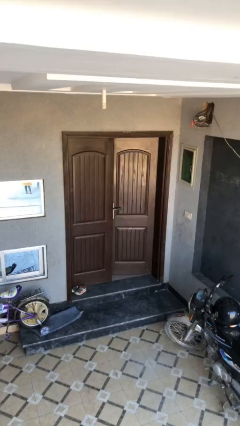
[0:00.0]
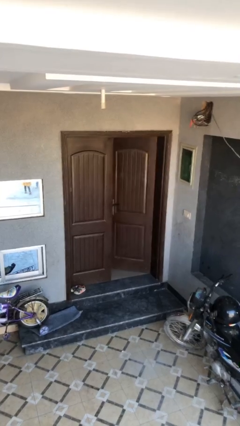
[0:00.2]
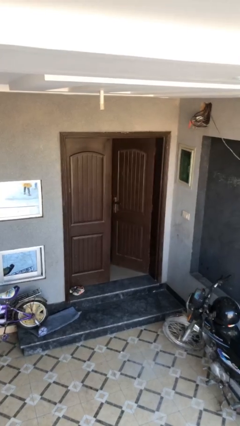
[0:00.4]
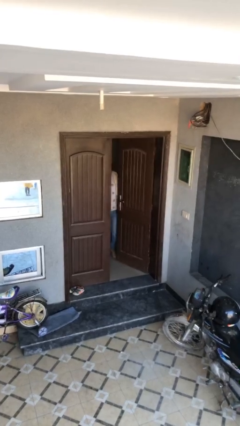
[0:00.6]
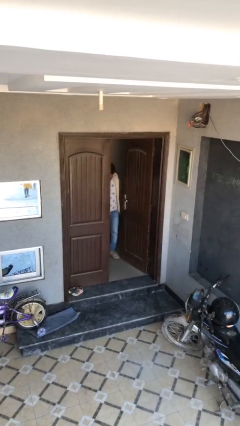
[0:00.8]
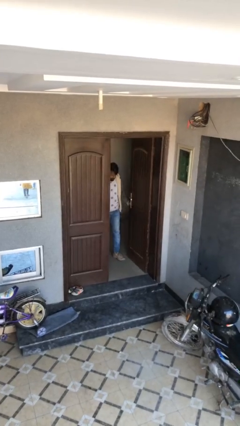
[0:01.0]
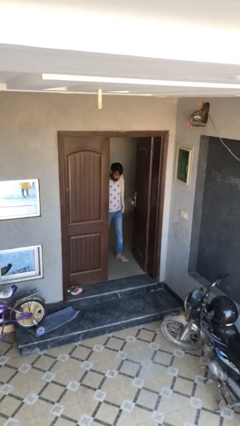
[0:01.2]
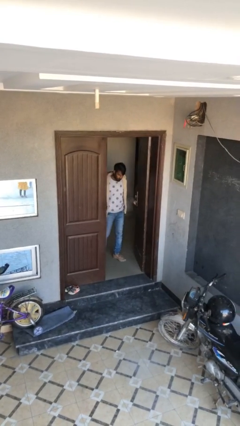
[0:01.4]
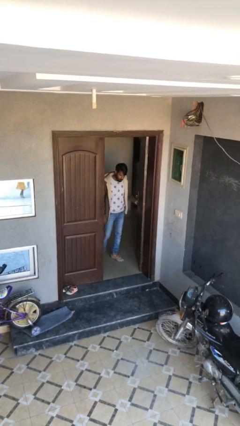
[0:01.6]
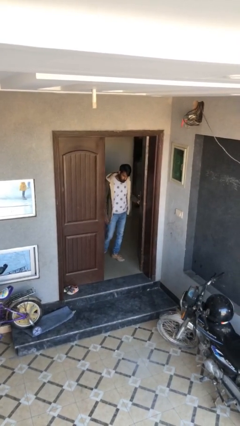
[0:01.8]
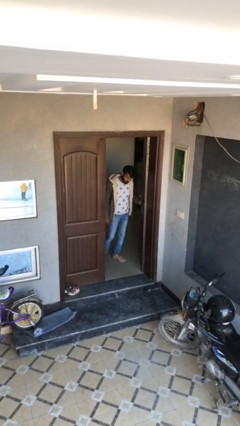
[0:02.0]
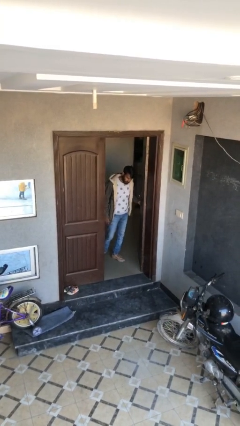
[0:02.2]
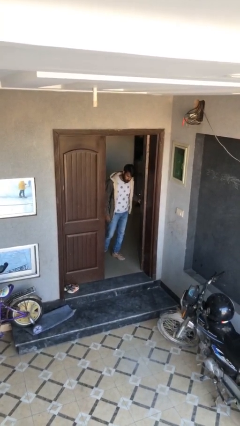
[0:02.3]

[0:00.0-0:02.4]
person opens facility door

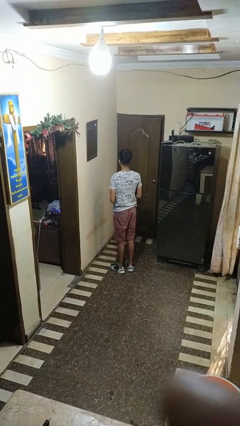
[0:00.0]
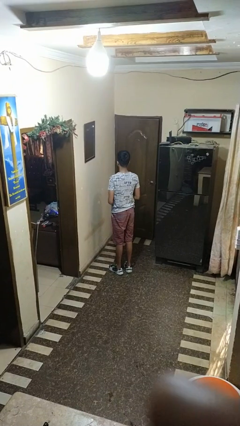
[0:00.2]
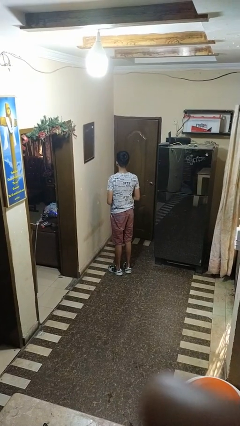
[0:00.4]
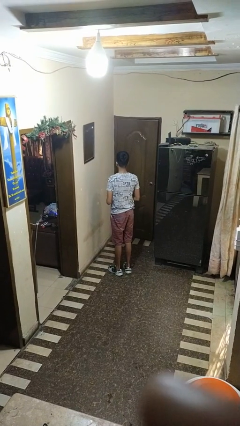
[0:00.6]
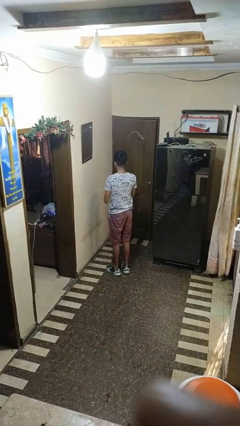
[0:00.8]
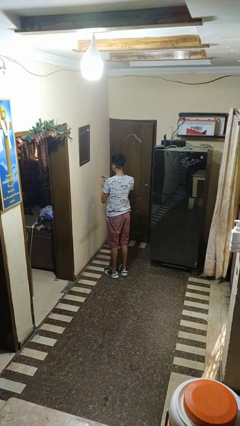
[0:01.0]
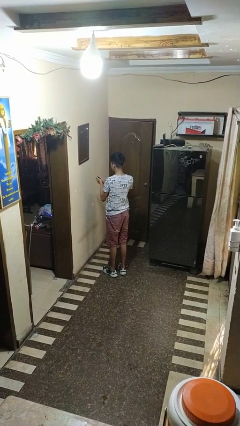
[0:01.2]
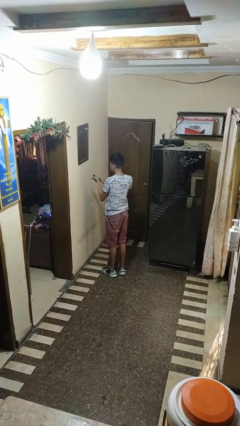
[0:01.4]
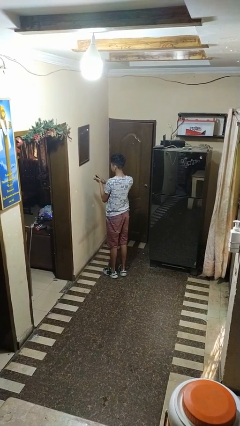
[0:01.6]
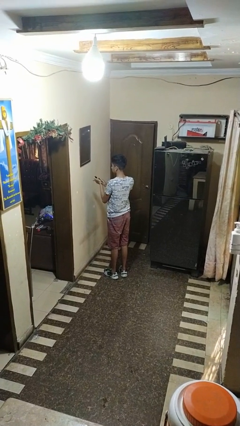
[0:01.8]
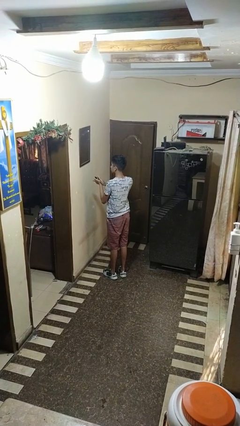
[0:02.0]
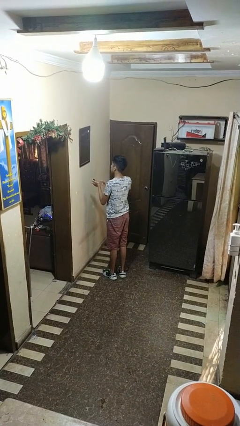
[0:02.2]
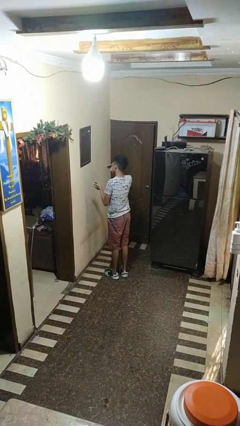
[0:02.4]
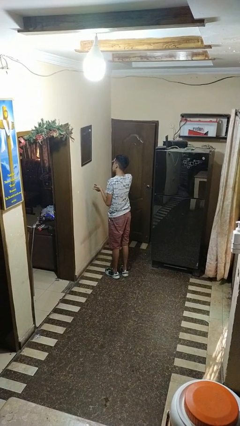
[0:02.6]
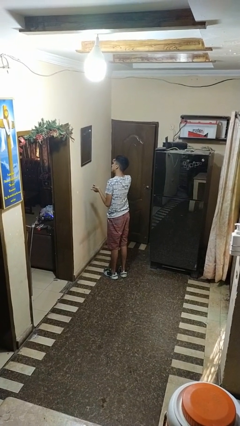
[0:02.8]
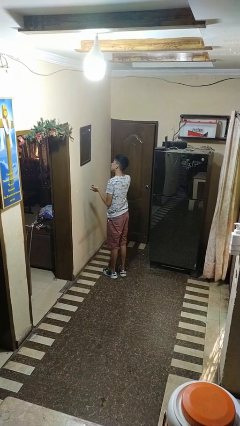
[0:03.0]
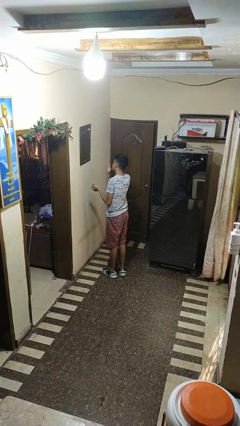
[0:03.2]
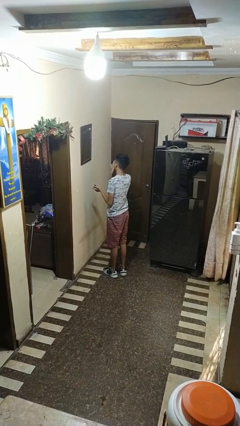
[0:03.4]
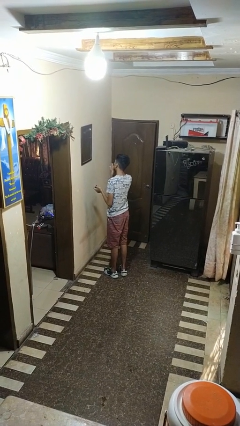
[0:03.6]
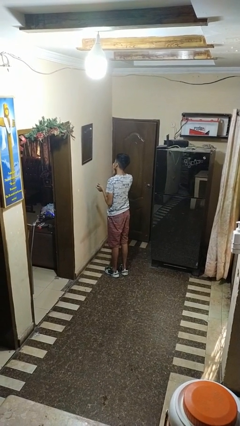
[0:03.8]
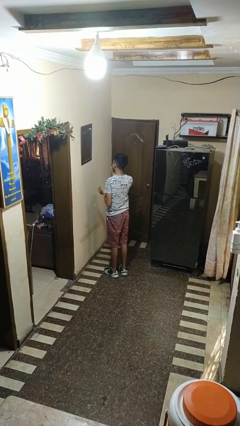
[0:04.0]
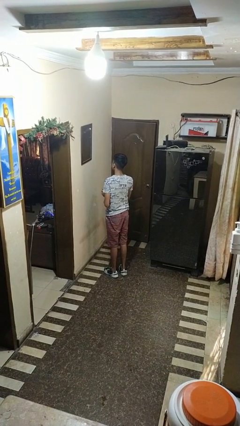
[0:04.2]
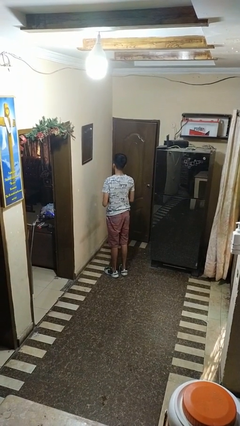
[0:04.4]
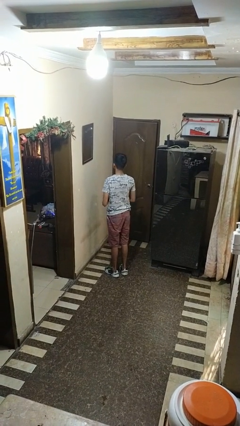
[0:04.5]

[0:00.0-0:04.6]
person applies foundation makeup

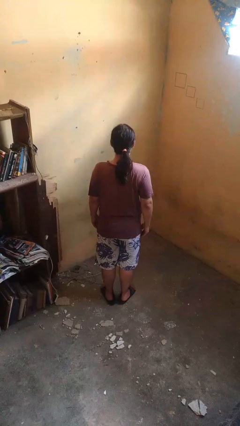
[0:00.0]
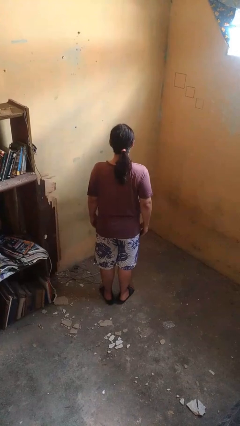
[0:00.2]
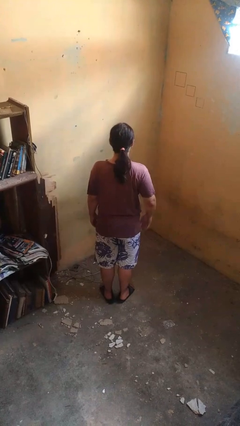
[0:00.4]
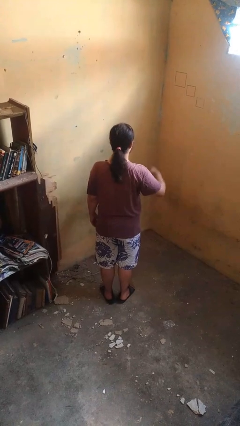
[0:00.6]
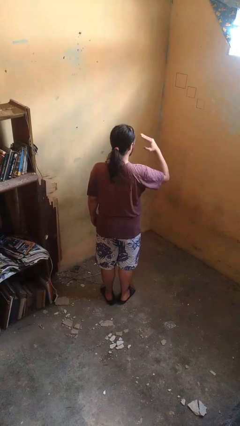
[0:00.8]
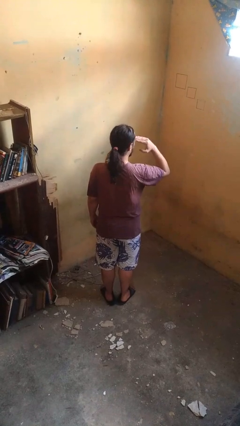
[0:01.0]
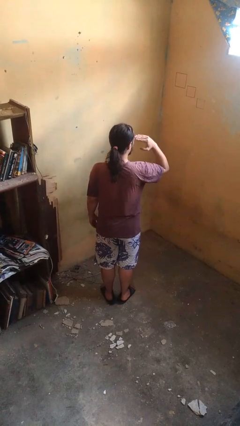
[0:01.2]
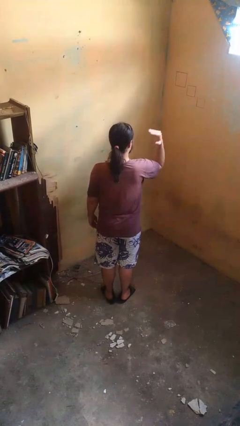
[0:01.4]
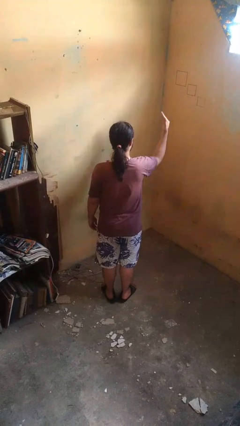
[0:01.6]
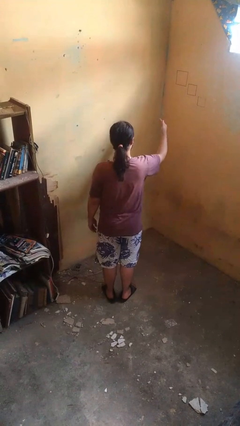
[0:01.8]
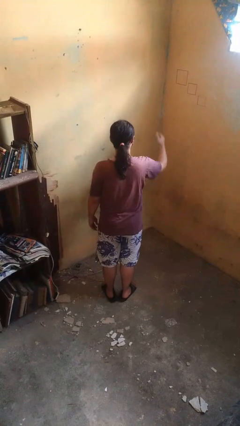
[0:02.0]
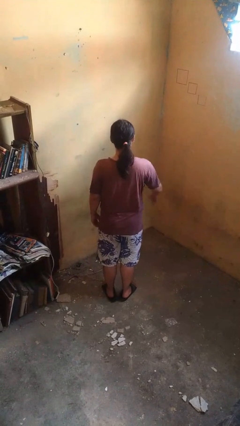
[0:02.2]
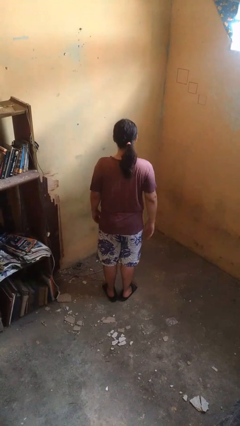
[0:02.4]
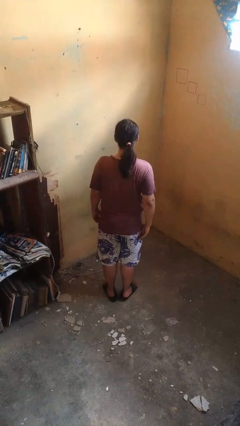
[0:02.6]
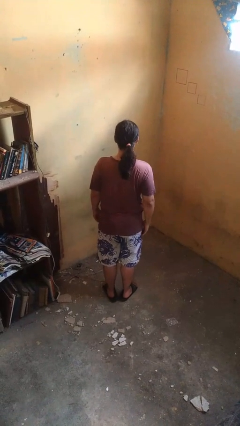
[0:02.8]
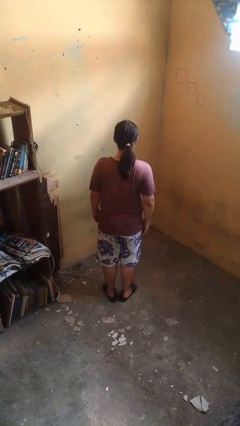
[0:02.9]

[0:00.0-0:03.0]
person salutes

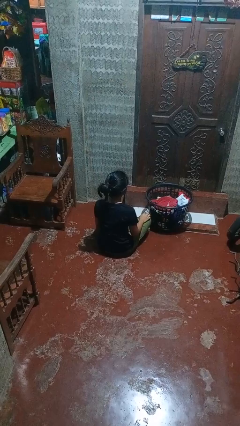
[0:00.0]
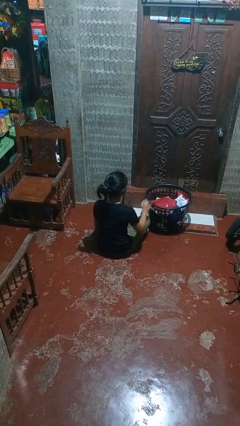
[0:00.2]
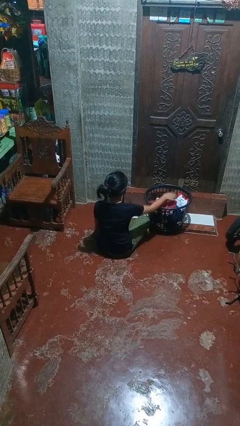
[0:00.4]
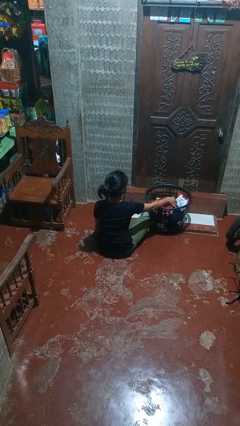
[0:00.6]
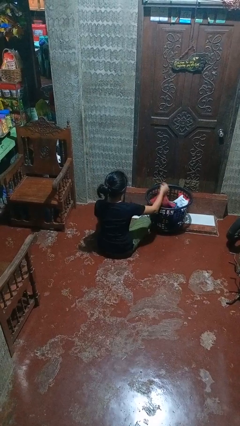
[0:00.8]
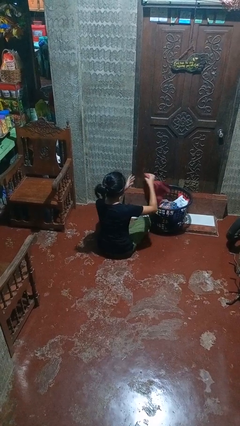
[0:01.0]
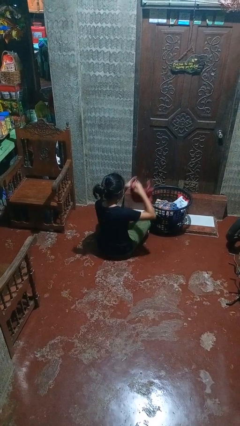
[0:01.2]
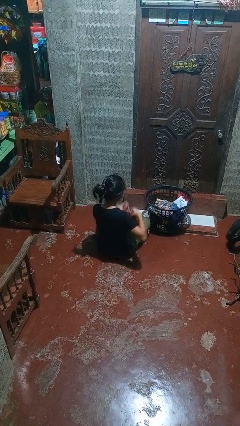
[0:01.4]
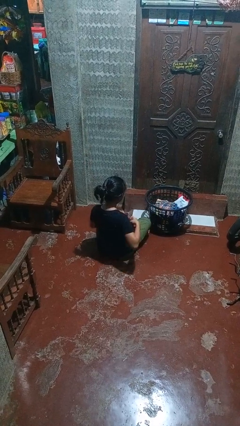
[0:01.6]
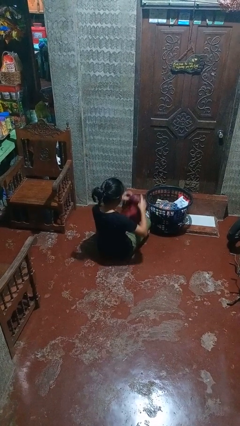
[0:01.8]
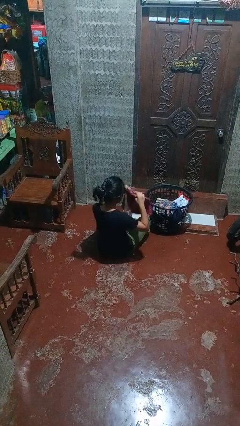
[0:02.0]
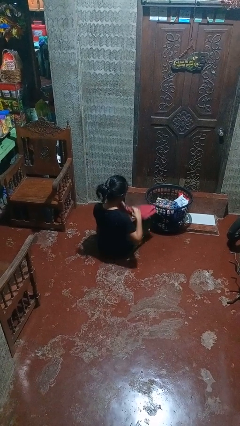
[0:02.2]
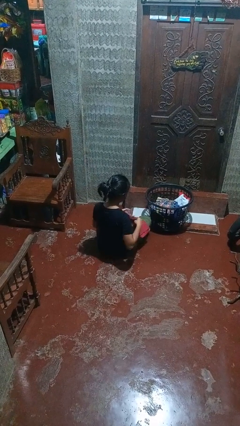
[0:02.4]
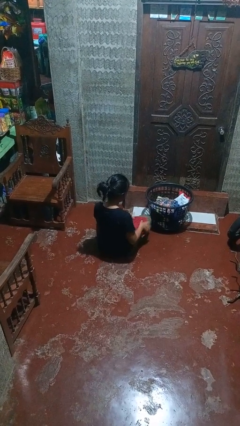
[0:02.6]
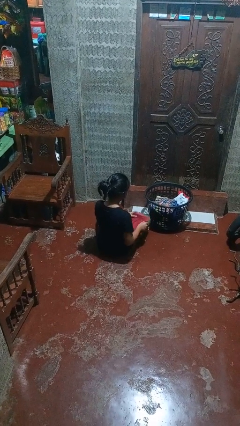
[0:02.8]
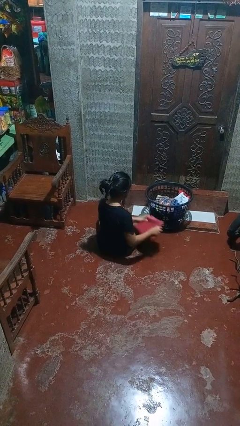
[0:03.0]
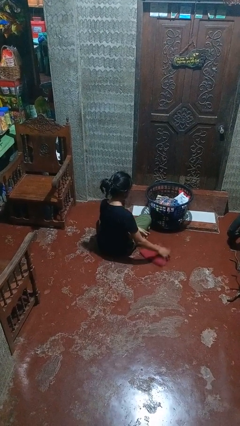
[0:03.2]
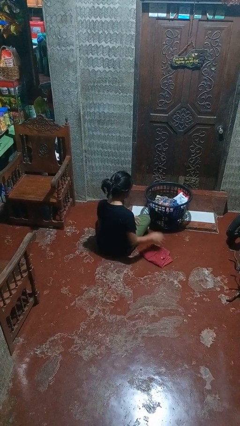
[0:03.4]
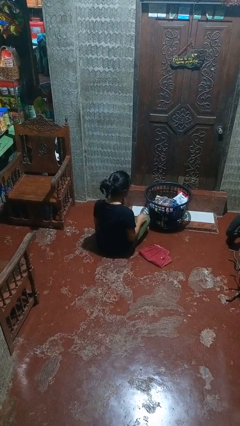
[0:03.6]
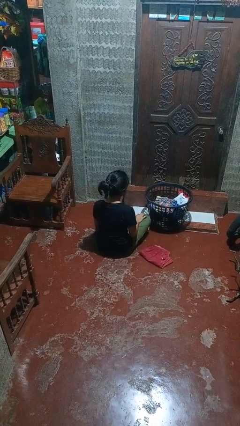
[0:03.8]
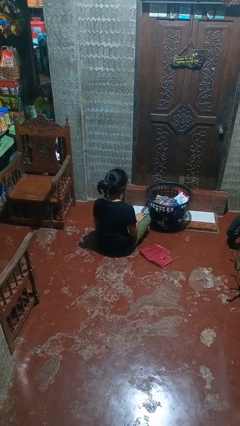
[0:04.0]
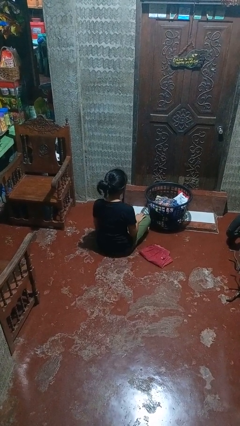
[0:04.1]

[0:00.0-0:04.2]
person folds pants

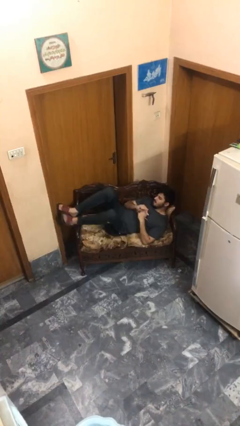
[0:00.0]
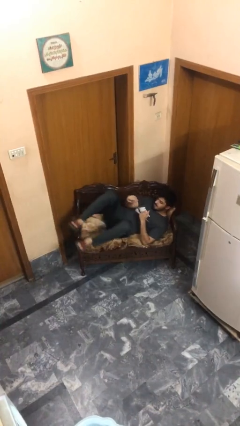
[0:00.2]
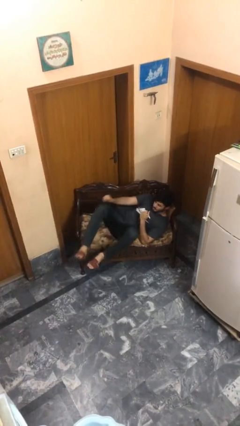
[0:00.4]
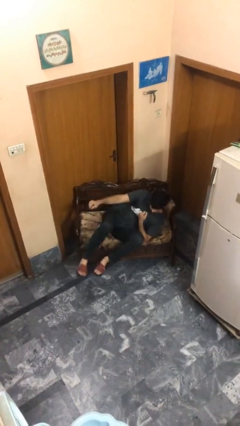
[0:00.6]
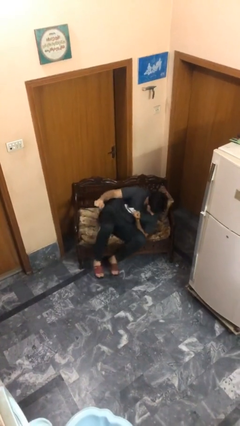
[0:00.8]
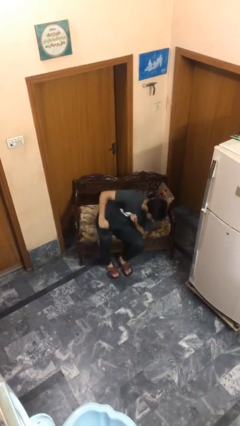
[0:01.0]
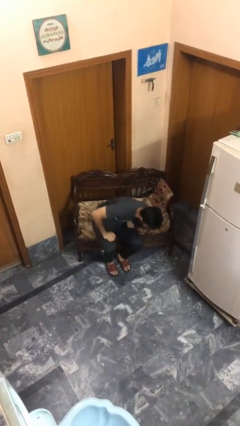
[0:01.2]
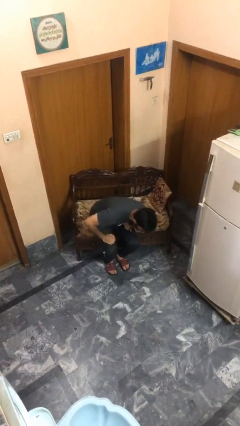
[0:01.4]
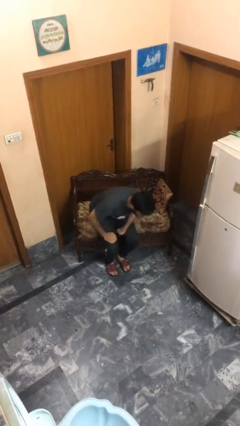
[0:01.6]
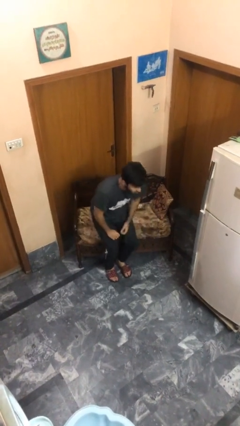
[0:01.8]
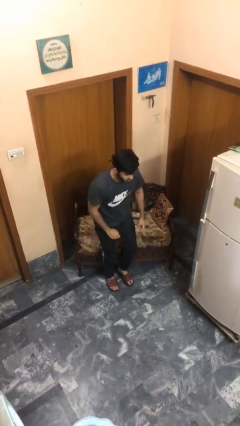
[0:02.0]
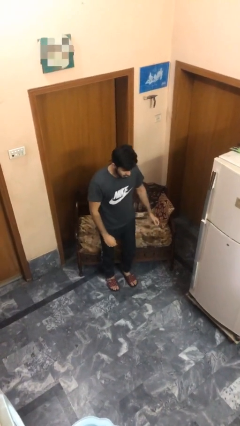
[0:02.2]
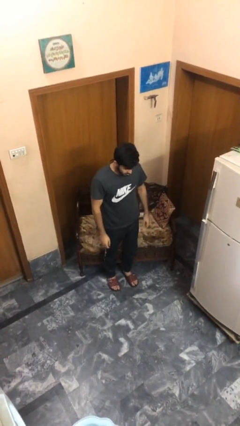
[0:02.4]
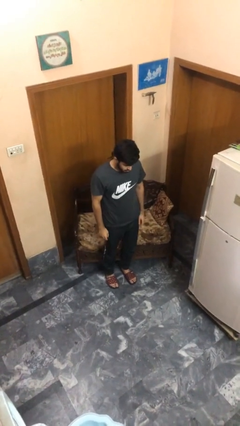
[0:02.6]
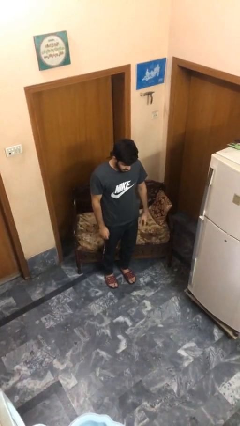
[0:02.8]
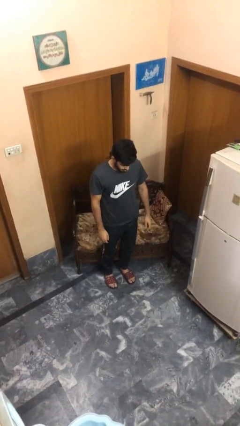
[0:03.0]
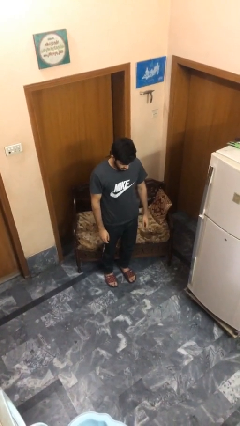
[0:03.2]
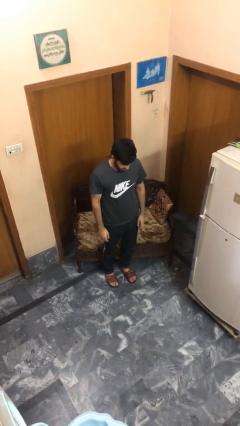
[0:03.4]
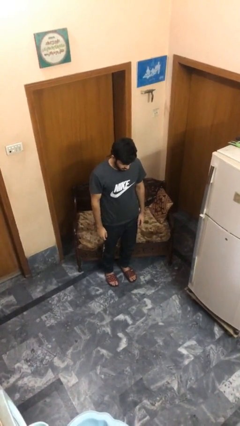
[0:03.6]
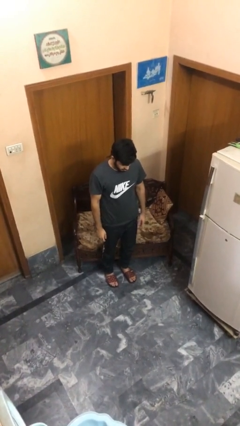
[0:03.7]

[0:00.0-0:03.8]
person stands up
